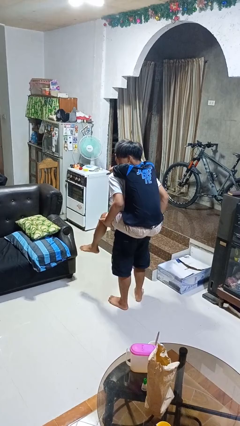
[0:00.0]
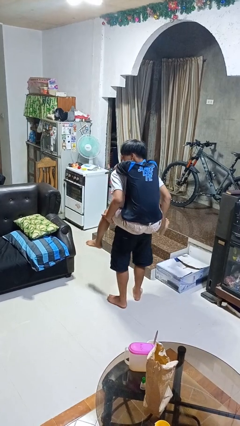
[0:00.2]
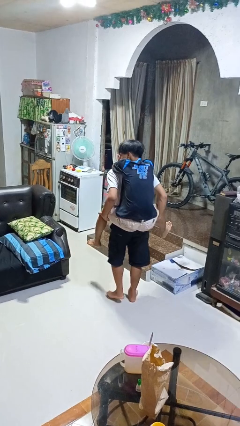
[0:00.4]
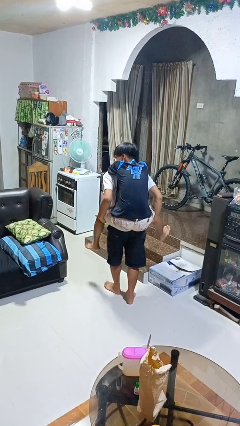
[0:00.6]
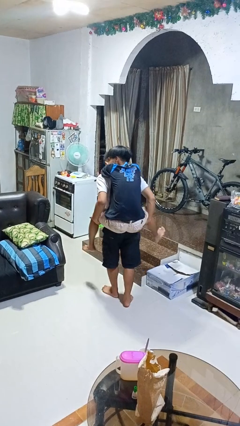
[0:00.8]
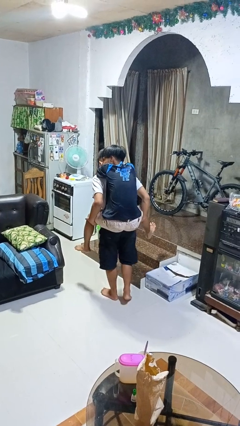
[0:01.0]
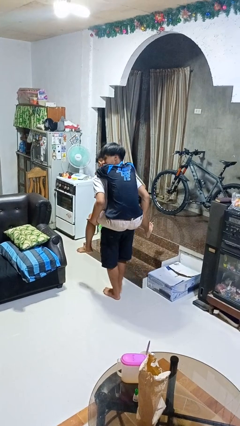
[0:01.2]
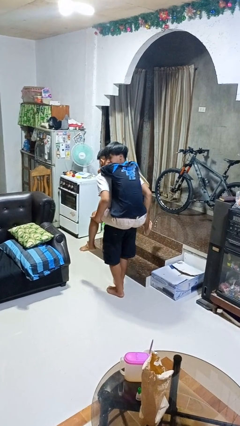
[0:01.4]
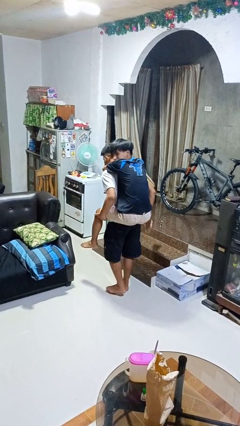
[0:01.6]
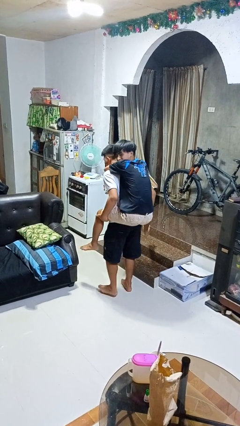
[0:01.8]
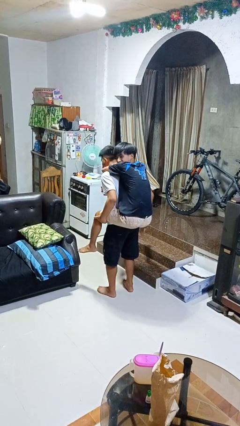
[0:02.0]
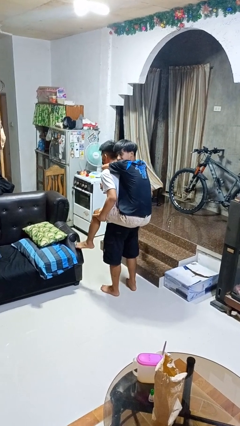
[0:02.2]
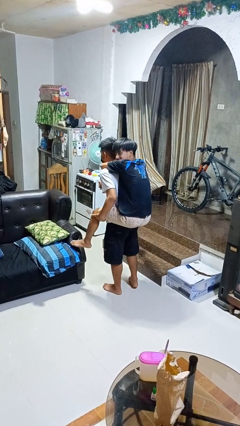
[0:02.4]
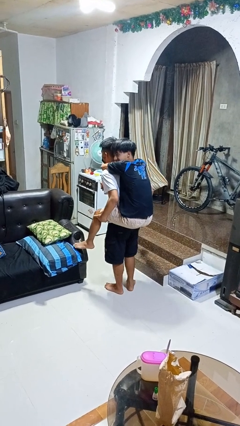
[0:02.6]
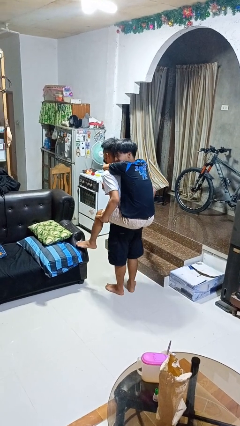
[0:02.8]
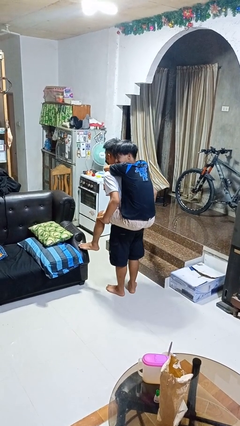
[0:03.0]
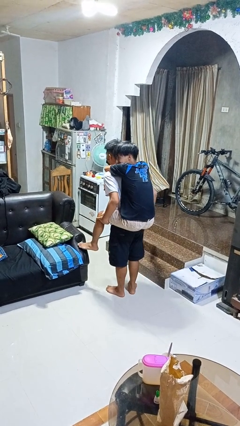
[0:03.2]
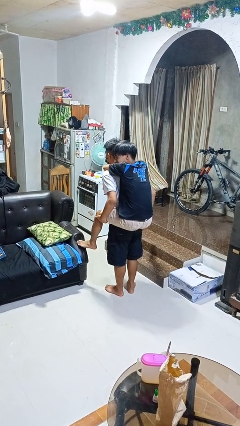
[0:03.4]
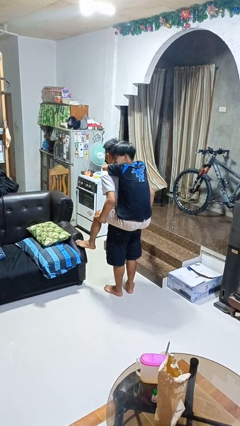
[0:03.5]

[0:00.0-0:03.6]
person carries person on back

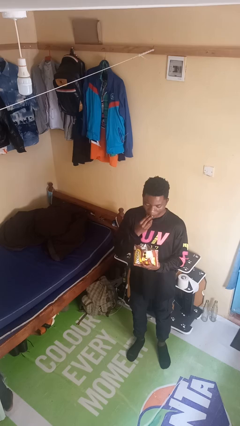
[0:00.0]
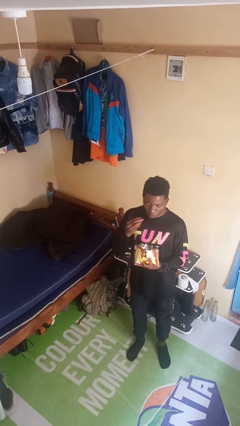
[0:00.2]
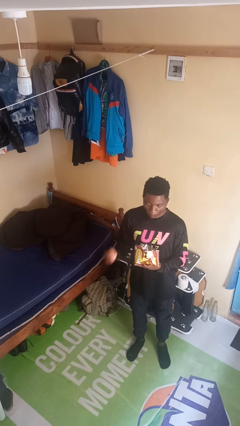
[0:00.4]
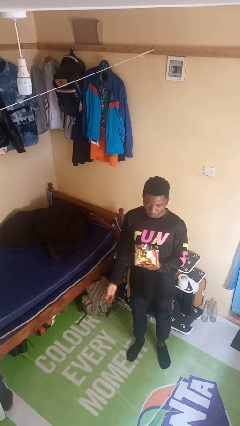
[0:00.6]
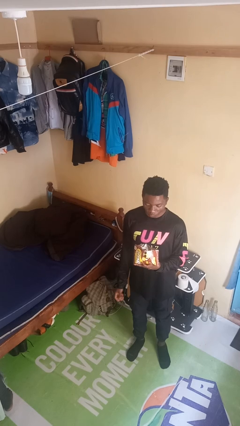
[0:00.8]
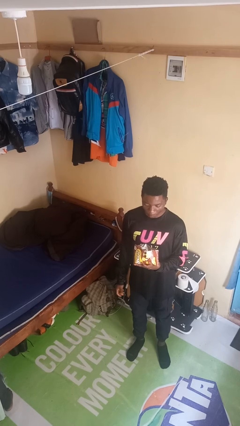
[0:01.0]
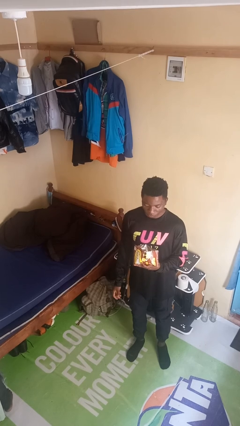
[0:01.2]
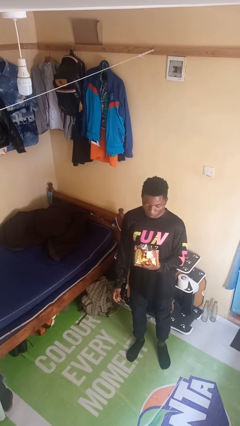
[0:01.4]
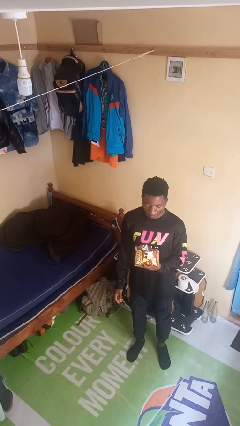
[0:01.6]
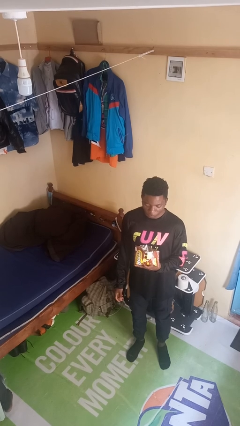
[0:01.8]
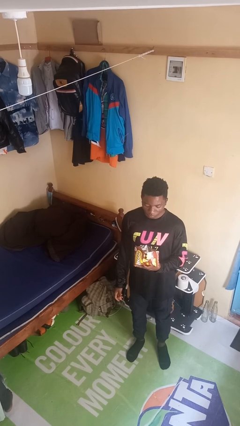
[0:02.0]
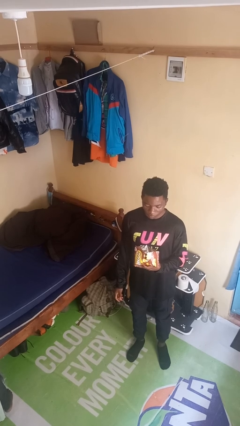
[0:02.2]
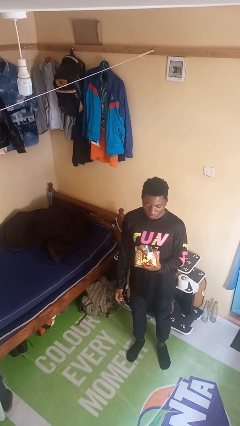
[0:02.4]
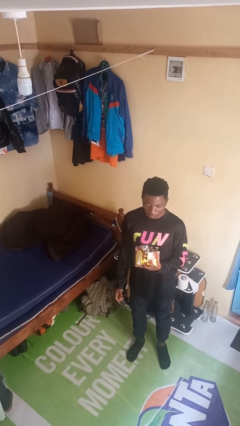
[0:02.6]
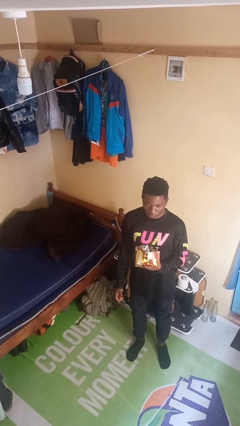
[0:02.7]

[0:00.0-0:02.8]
person eats snack from bag

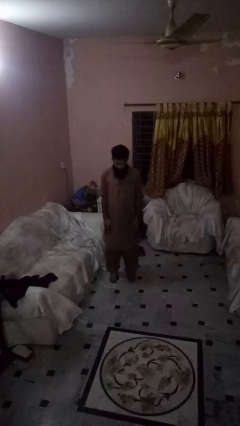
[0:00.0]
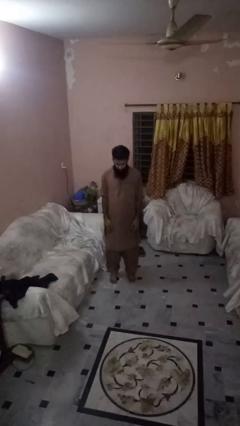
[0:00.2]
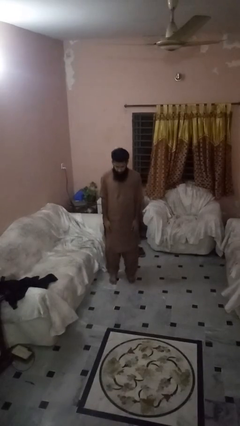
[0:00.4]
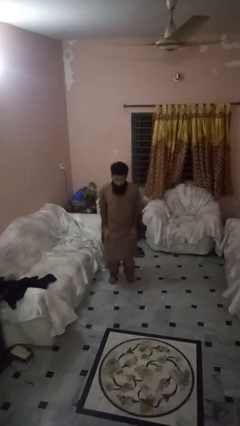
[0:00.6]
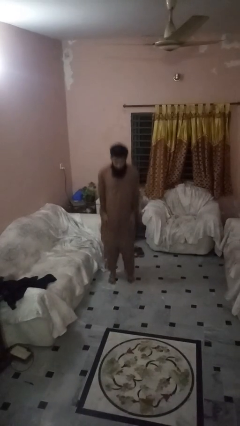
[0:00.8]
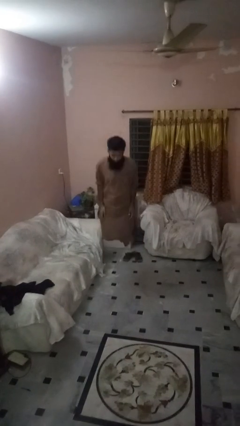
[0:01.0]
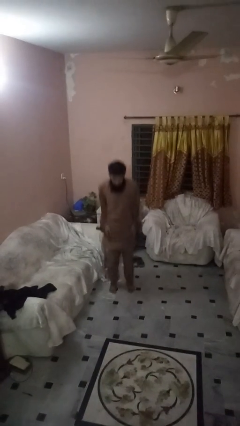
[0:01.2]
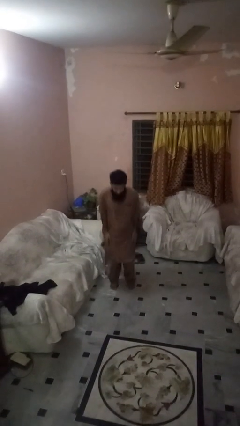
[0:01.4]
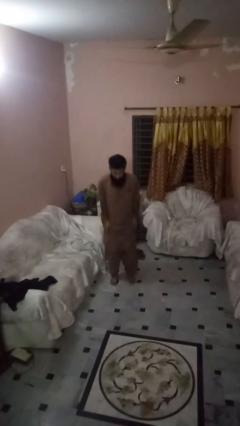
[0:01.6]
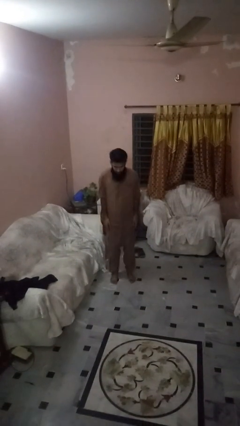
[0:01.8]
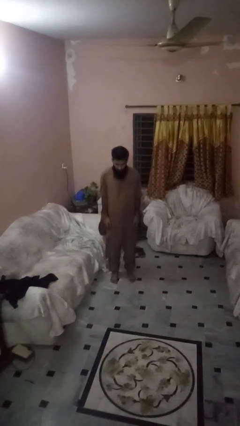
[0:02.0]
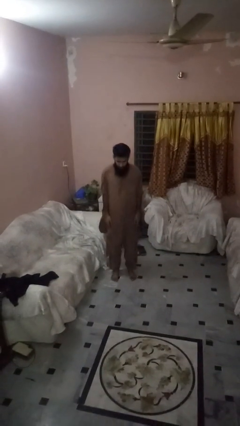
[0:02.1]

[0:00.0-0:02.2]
person jumps

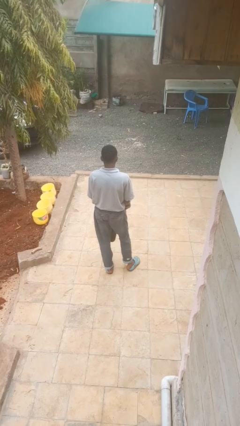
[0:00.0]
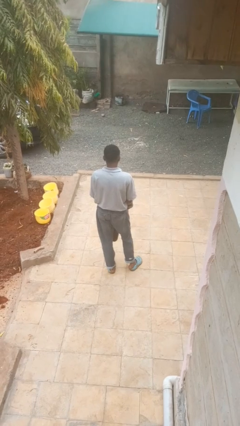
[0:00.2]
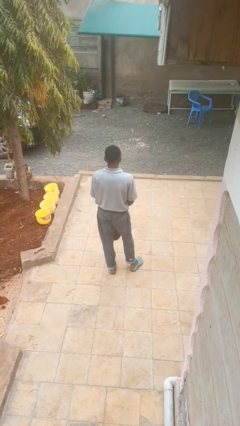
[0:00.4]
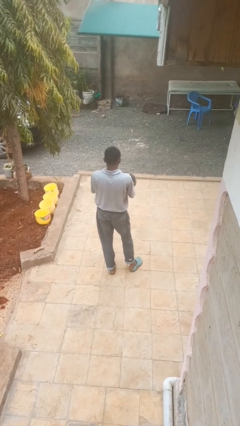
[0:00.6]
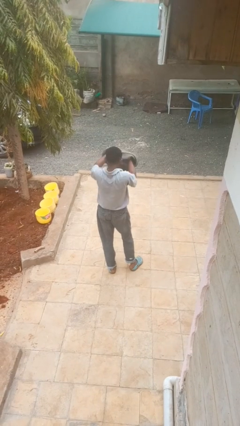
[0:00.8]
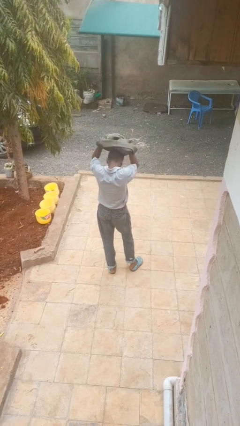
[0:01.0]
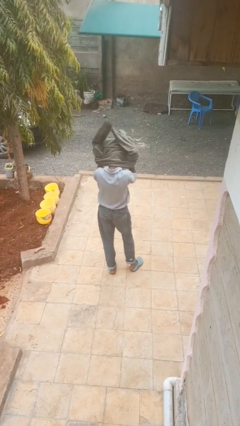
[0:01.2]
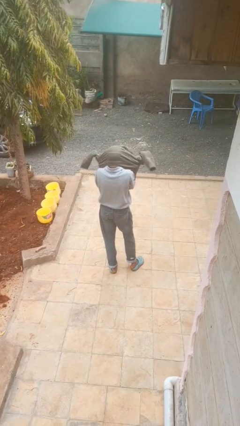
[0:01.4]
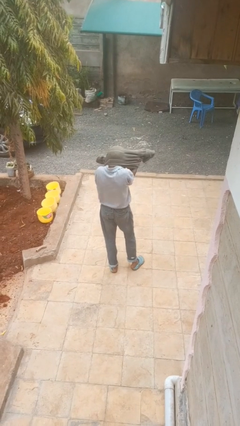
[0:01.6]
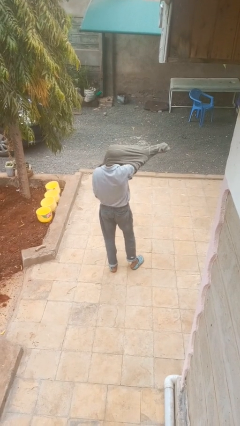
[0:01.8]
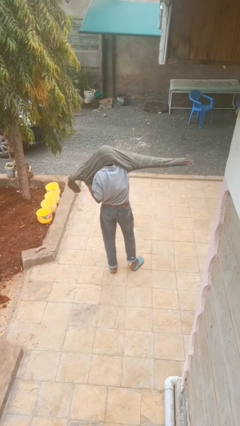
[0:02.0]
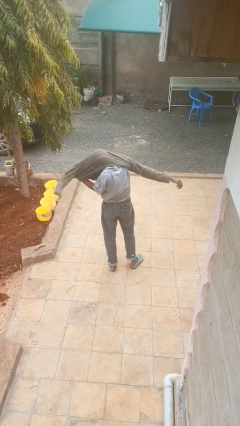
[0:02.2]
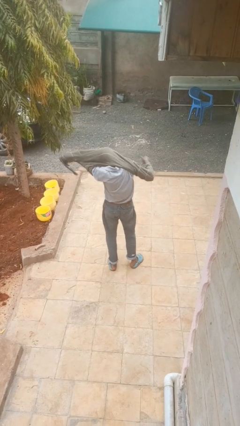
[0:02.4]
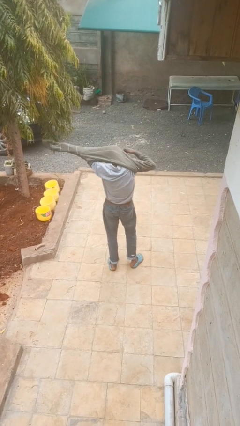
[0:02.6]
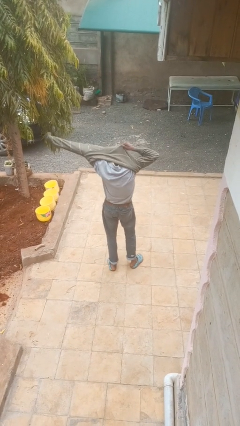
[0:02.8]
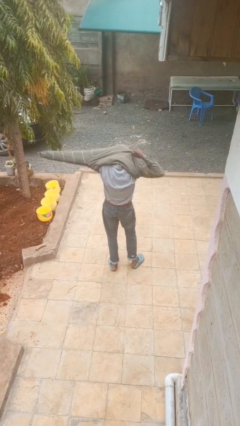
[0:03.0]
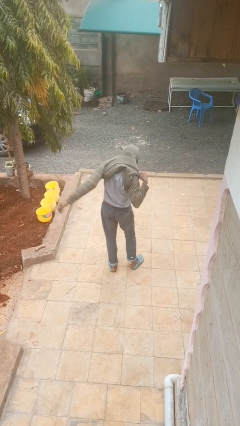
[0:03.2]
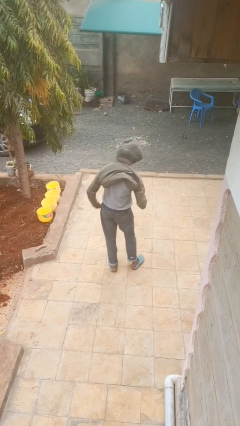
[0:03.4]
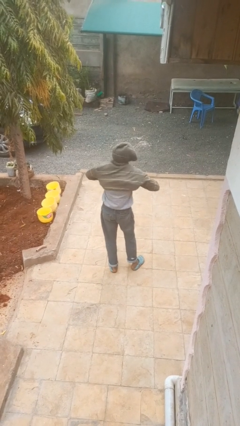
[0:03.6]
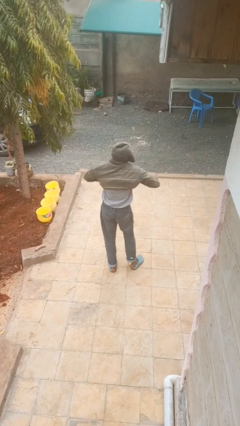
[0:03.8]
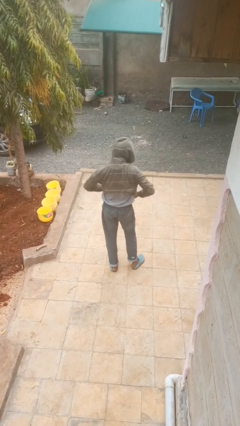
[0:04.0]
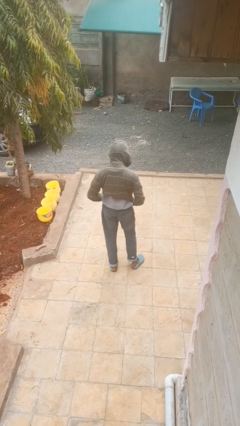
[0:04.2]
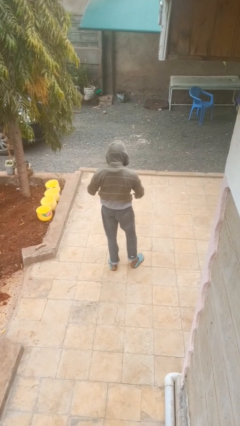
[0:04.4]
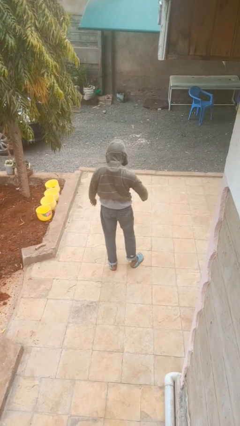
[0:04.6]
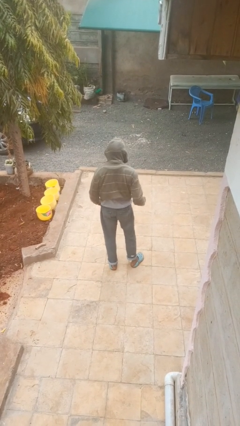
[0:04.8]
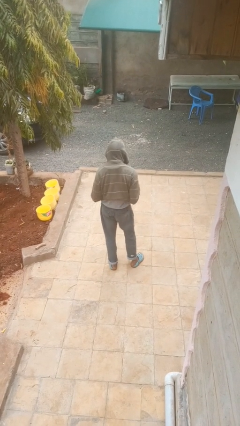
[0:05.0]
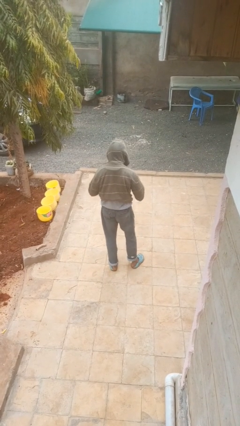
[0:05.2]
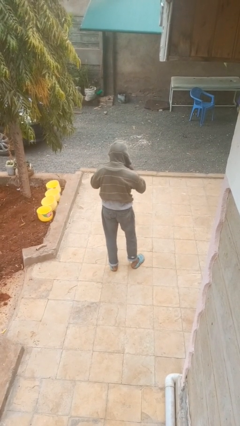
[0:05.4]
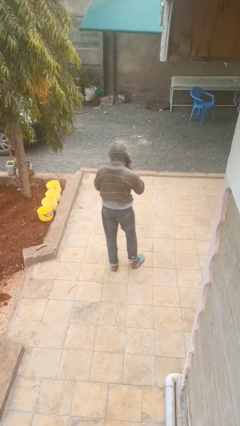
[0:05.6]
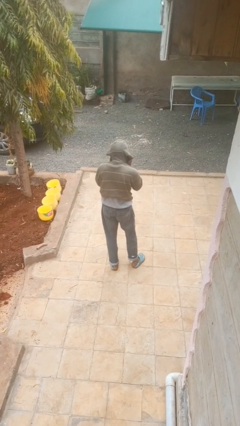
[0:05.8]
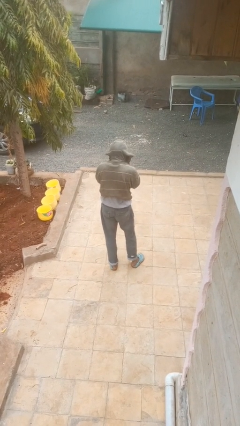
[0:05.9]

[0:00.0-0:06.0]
person puts on hoodie

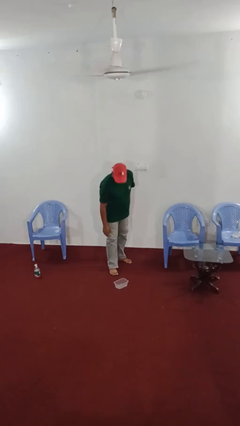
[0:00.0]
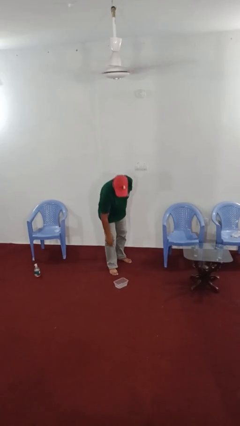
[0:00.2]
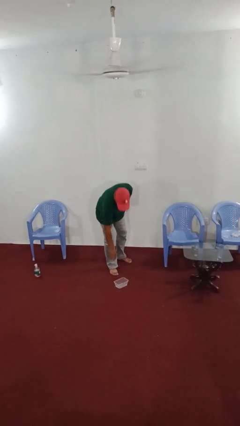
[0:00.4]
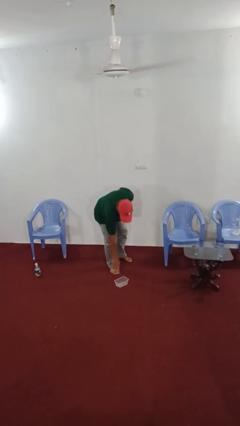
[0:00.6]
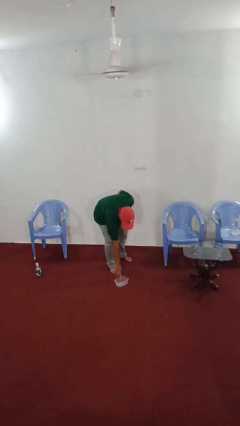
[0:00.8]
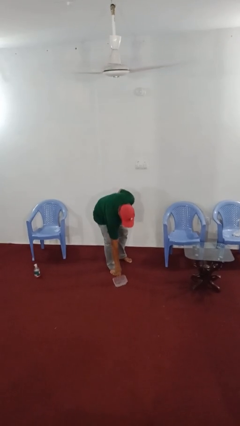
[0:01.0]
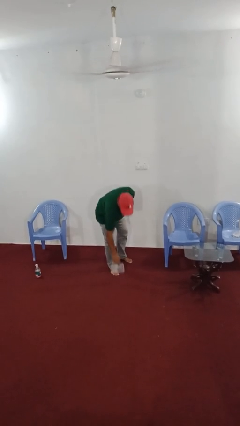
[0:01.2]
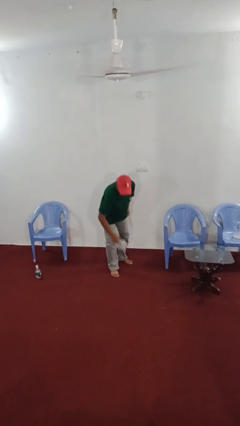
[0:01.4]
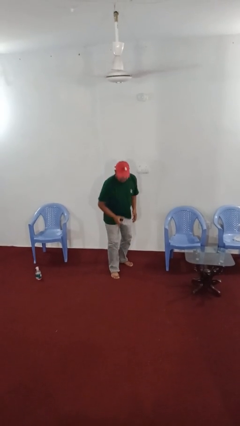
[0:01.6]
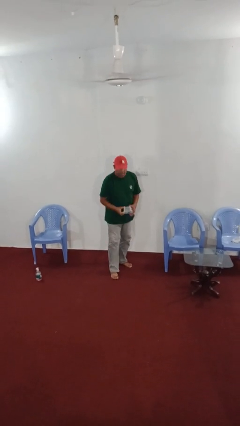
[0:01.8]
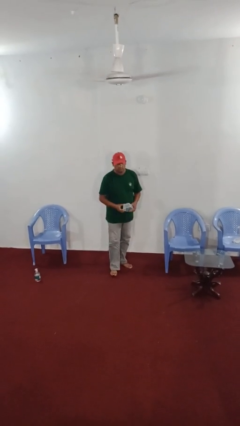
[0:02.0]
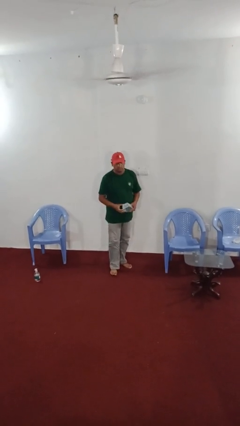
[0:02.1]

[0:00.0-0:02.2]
person picks up object from floor

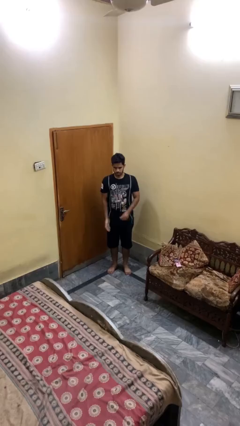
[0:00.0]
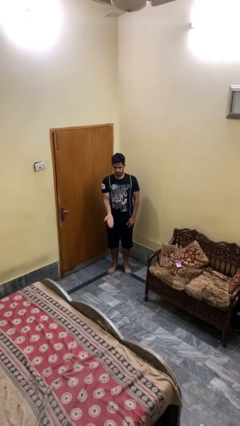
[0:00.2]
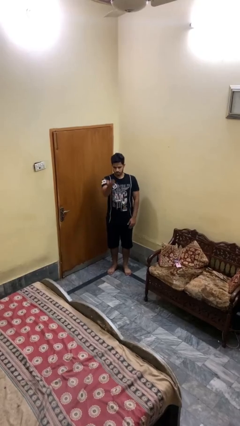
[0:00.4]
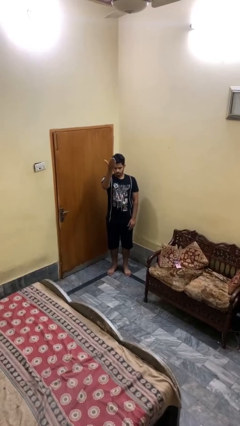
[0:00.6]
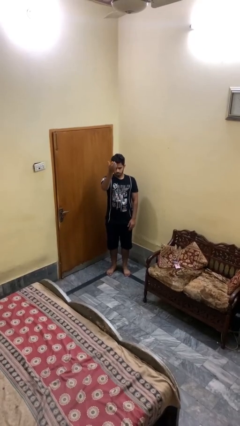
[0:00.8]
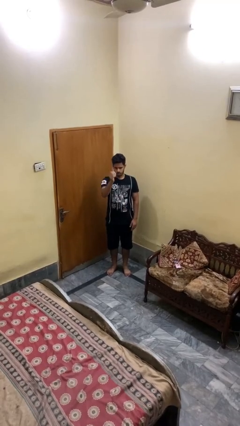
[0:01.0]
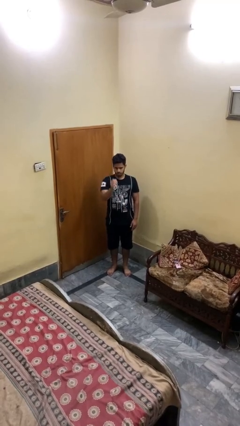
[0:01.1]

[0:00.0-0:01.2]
person gestures swipe up
